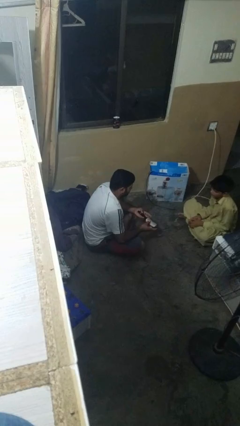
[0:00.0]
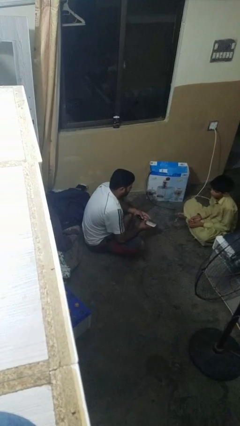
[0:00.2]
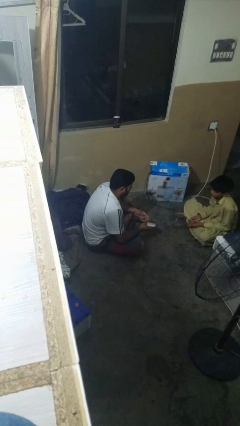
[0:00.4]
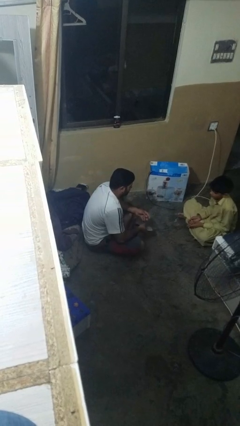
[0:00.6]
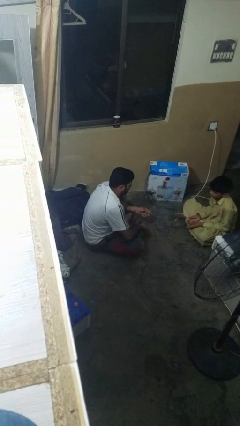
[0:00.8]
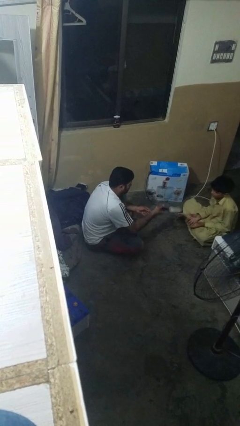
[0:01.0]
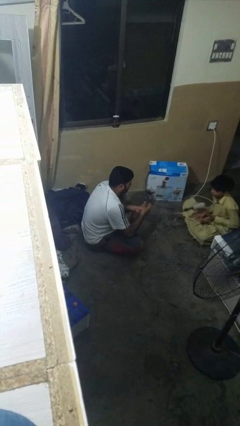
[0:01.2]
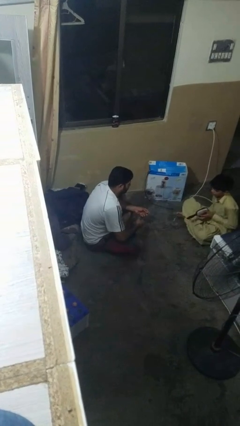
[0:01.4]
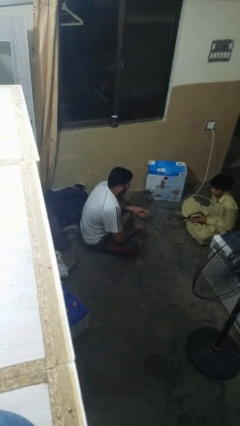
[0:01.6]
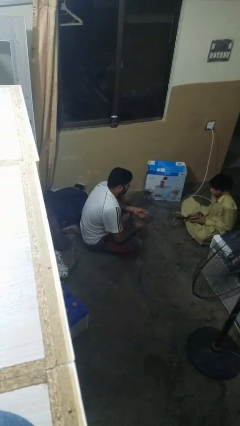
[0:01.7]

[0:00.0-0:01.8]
person throws object to person

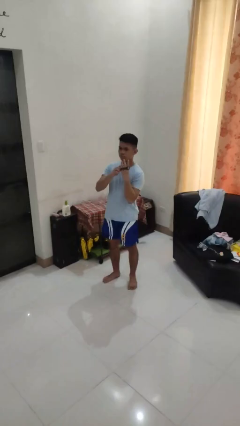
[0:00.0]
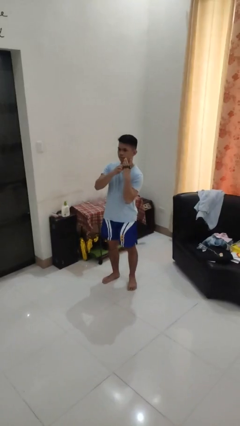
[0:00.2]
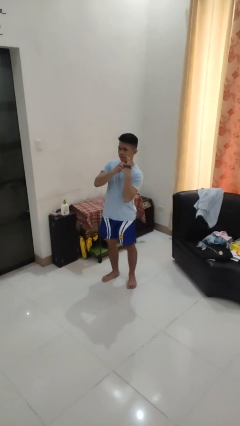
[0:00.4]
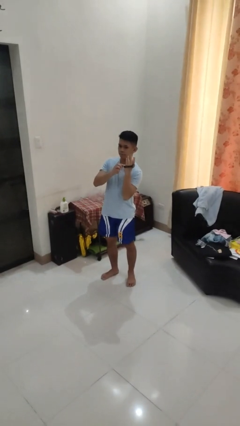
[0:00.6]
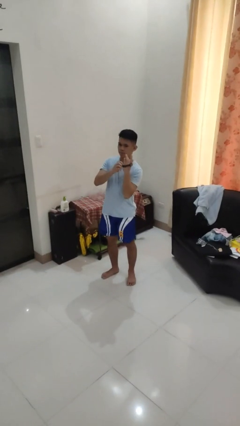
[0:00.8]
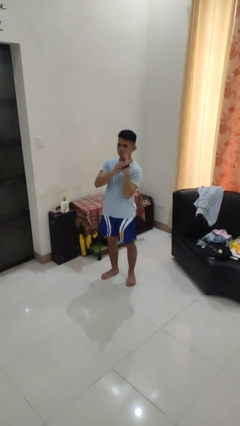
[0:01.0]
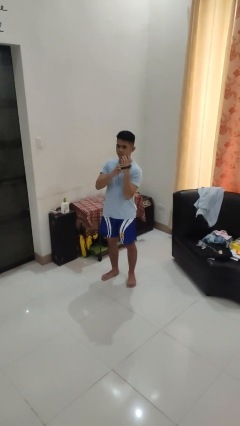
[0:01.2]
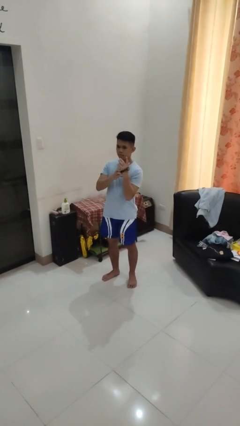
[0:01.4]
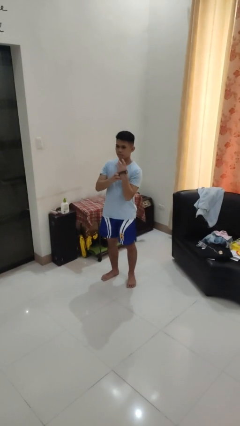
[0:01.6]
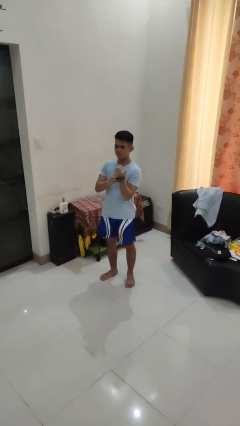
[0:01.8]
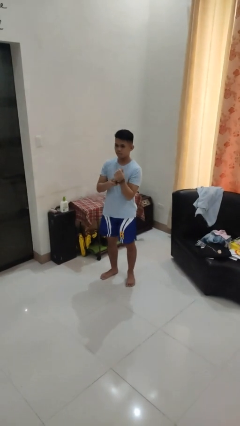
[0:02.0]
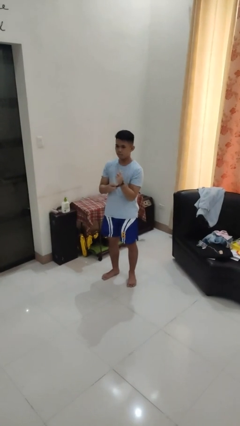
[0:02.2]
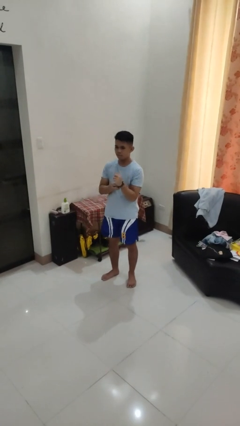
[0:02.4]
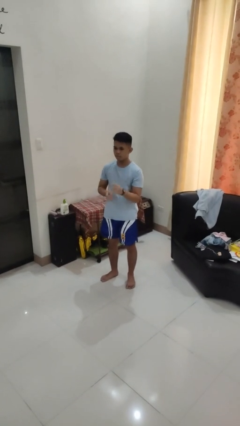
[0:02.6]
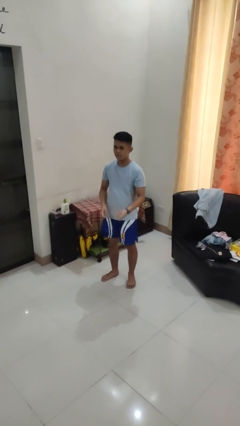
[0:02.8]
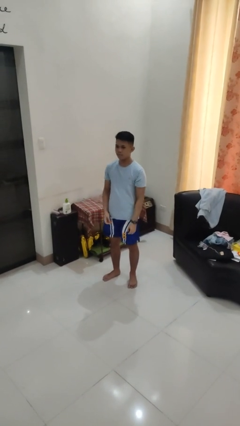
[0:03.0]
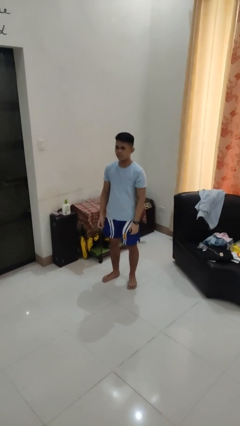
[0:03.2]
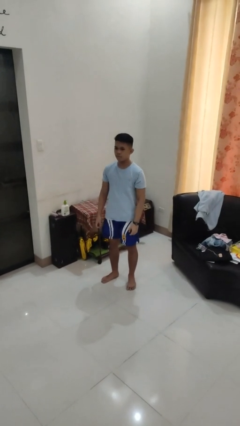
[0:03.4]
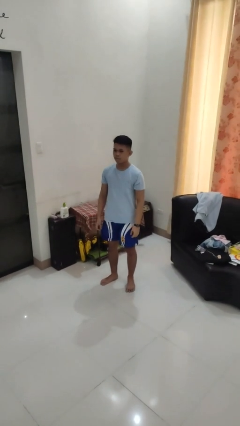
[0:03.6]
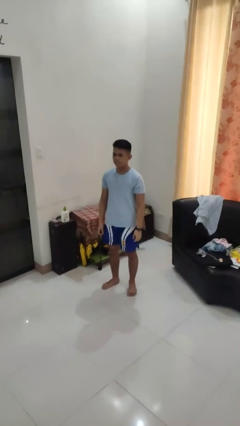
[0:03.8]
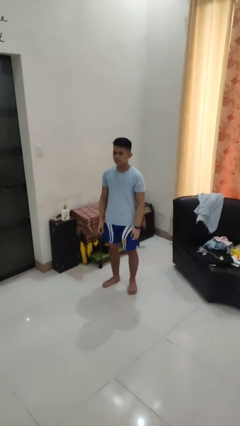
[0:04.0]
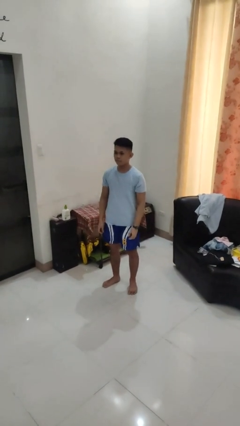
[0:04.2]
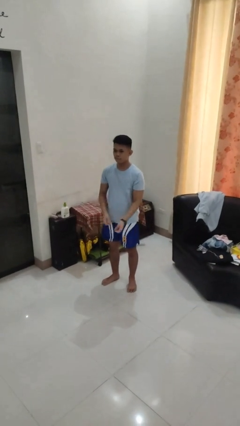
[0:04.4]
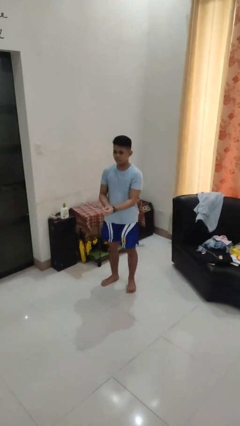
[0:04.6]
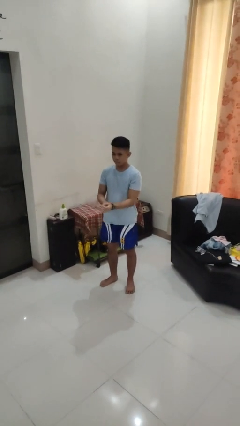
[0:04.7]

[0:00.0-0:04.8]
person puts on wristwatch

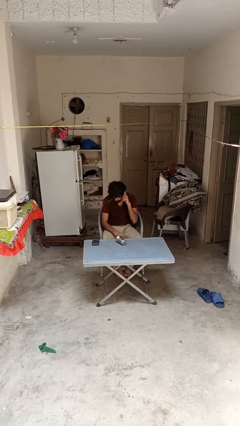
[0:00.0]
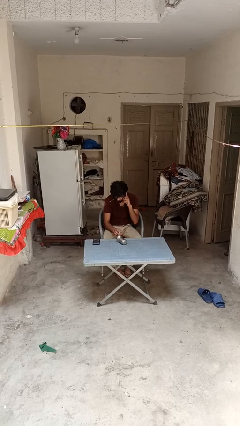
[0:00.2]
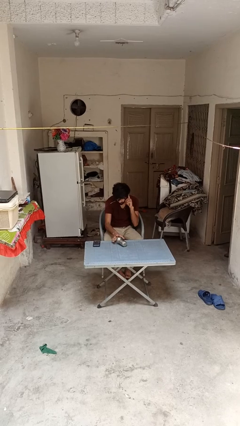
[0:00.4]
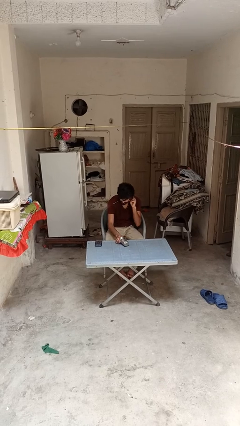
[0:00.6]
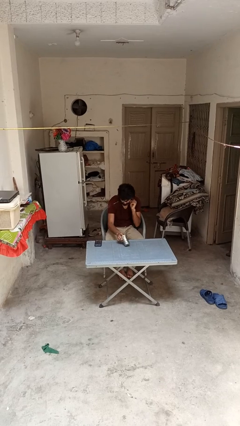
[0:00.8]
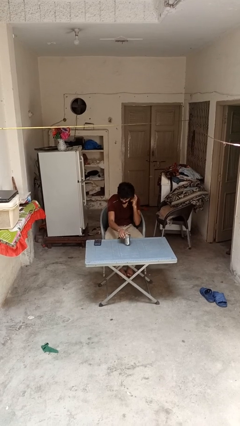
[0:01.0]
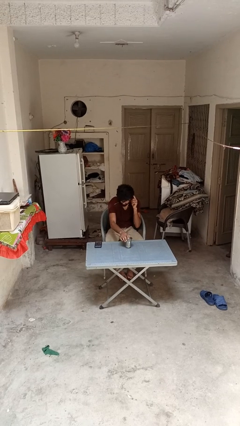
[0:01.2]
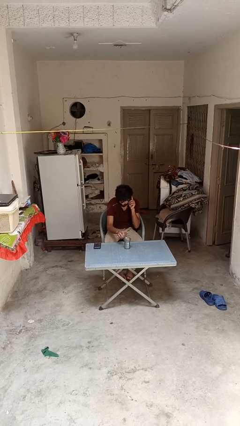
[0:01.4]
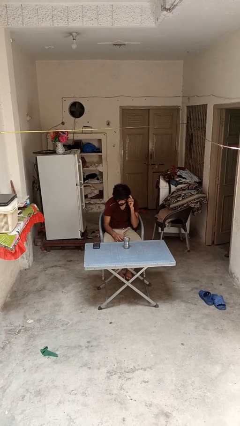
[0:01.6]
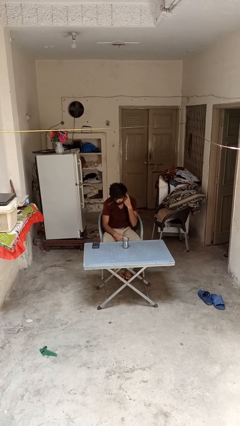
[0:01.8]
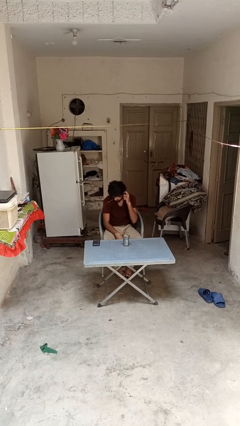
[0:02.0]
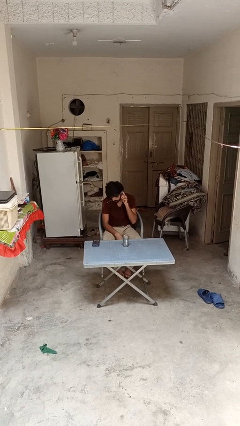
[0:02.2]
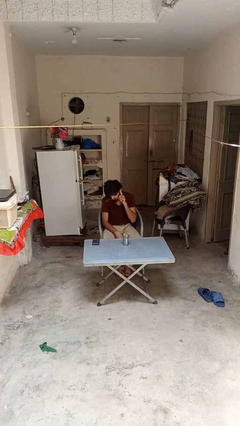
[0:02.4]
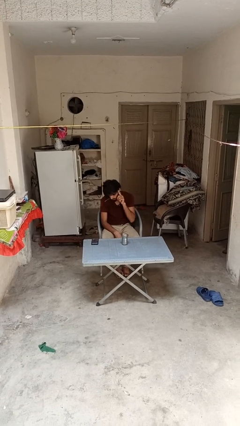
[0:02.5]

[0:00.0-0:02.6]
person sets upright glass

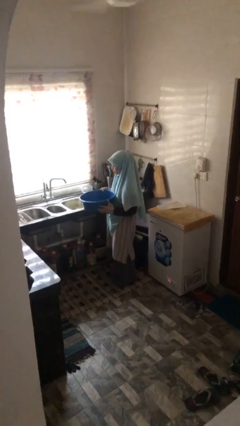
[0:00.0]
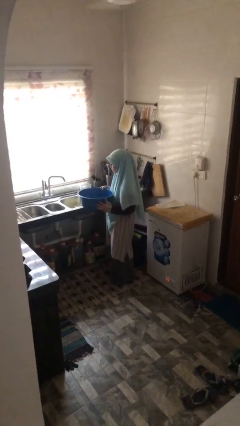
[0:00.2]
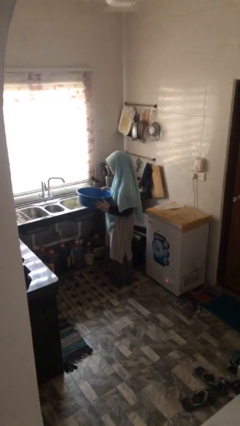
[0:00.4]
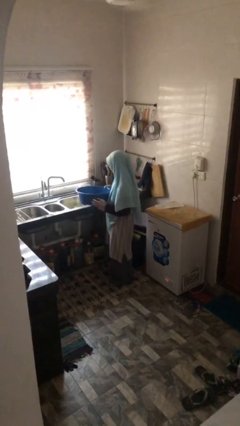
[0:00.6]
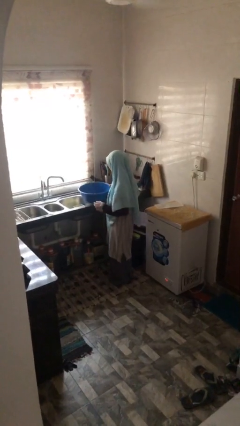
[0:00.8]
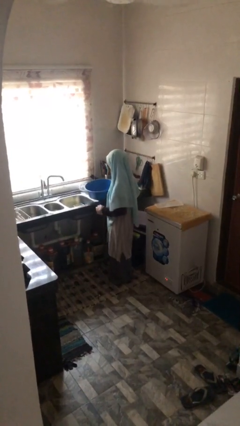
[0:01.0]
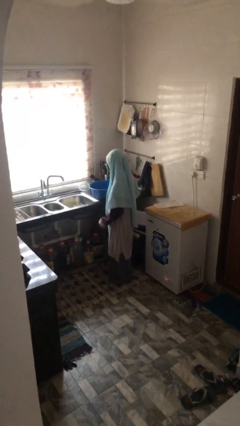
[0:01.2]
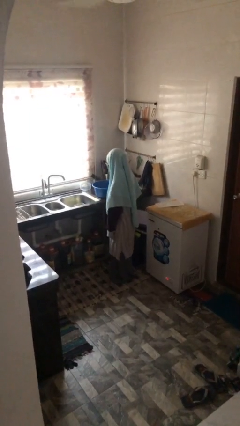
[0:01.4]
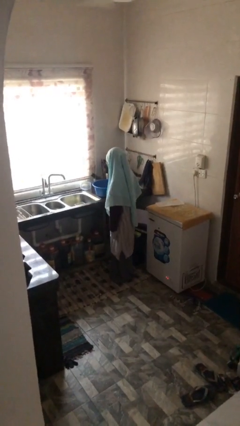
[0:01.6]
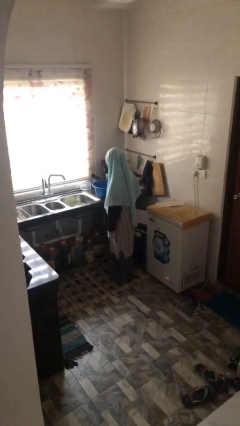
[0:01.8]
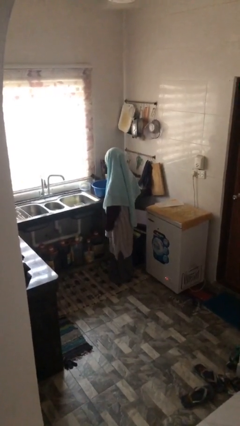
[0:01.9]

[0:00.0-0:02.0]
person puts down object on countertop

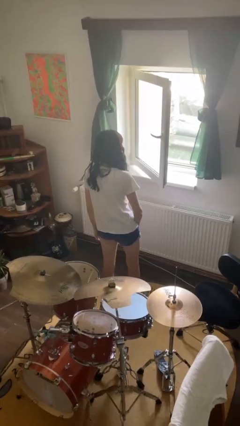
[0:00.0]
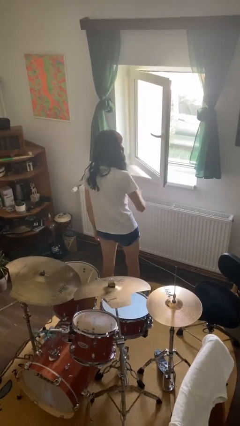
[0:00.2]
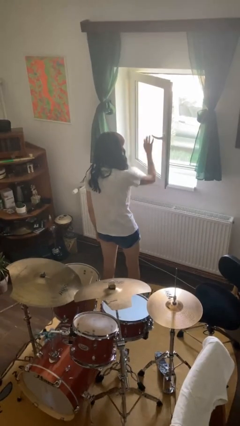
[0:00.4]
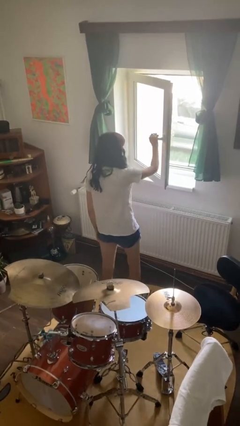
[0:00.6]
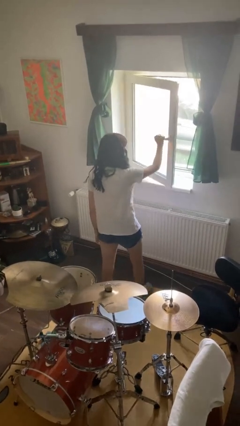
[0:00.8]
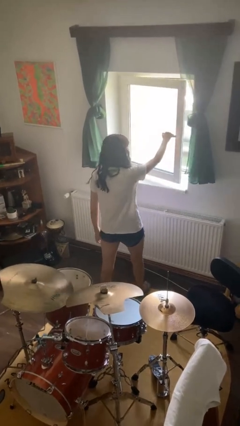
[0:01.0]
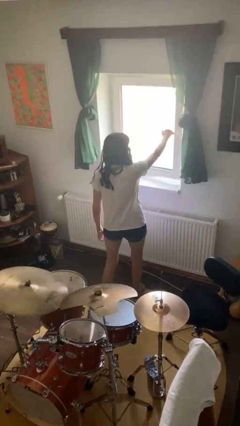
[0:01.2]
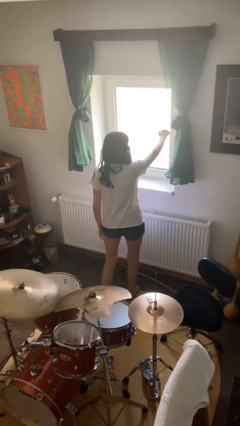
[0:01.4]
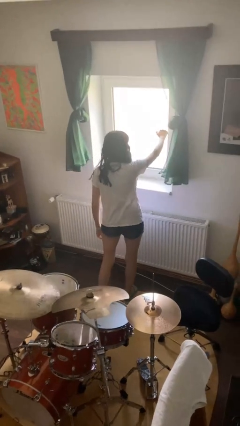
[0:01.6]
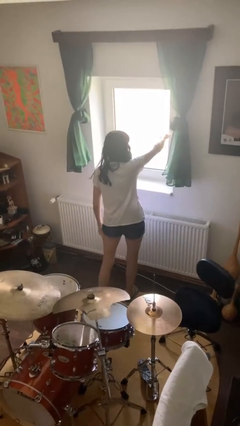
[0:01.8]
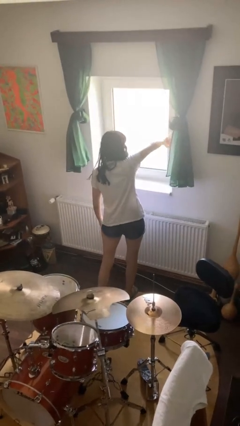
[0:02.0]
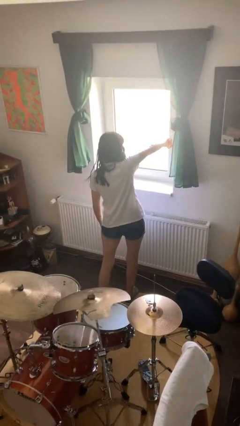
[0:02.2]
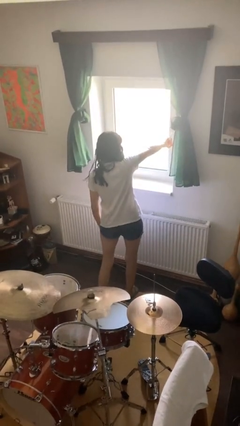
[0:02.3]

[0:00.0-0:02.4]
person closes home window

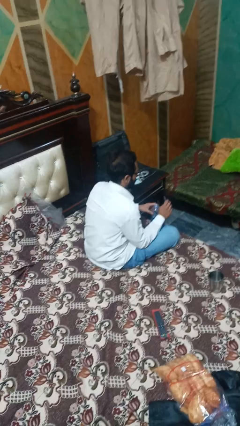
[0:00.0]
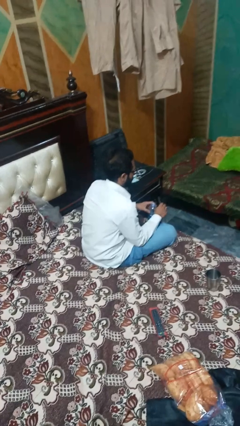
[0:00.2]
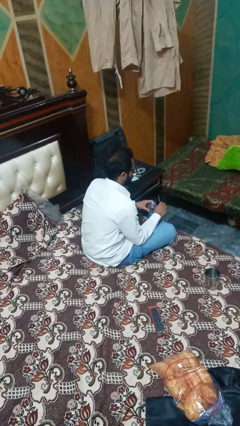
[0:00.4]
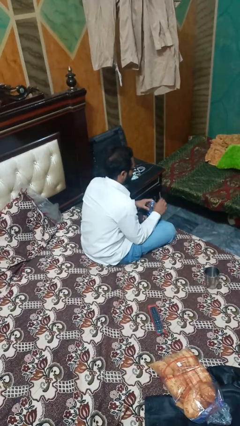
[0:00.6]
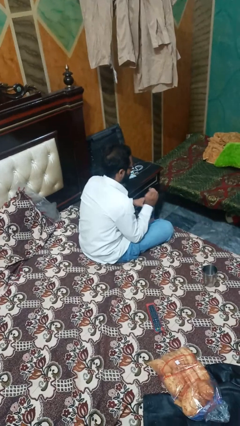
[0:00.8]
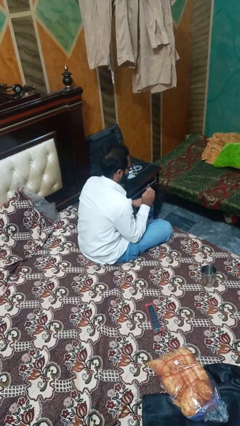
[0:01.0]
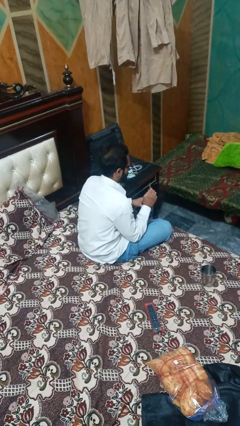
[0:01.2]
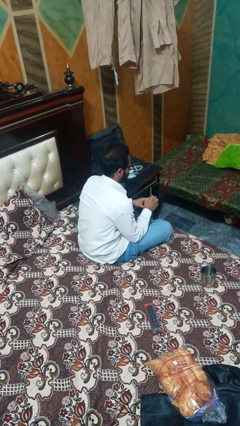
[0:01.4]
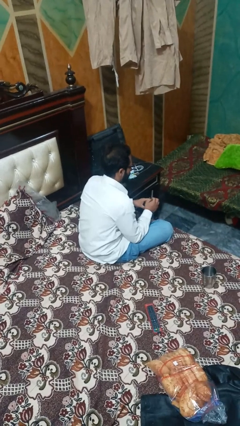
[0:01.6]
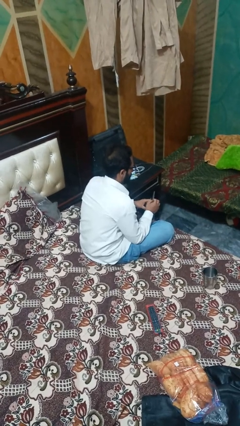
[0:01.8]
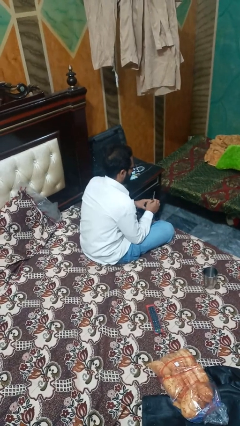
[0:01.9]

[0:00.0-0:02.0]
person pours liquid into cup

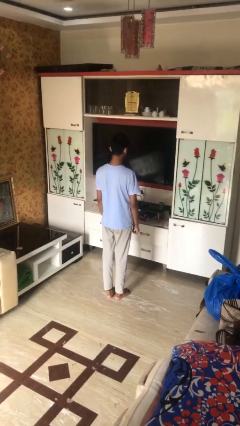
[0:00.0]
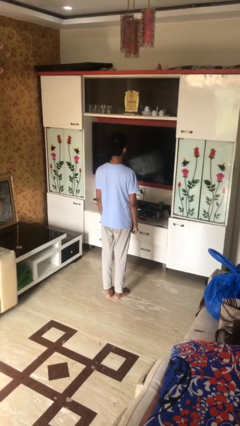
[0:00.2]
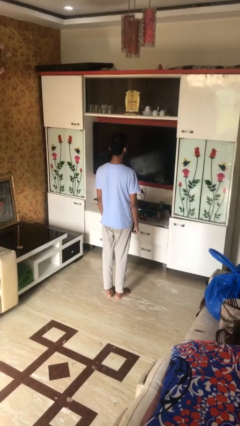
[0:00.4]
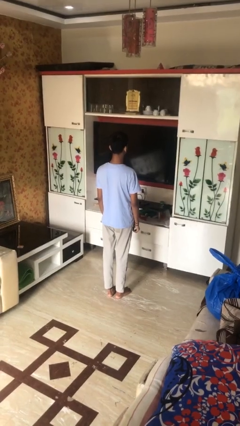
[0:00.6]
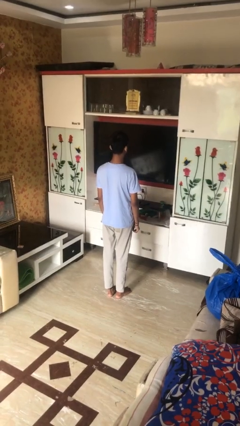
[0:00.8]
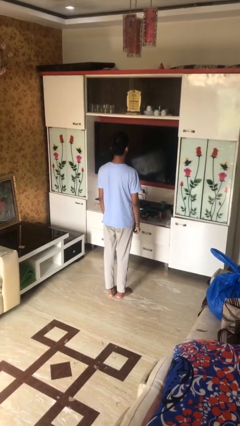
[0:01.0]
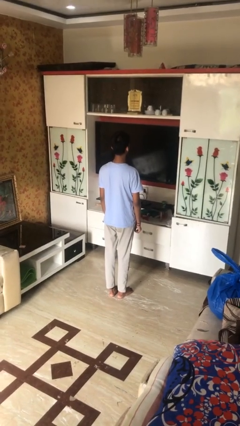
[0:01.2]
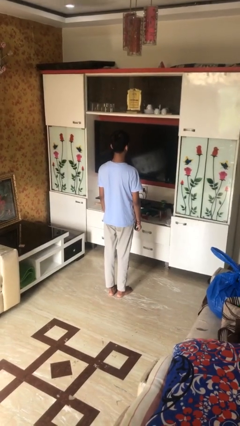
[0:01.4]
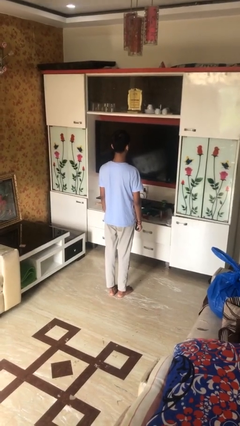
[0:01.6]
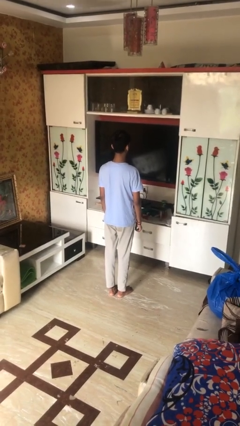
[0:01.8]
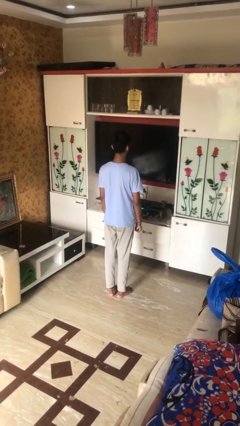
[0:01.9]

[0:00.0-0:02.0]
person nods head
